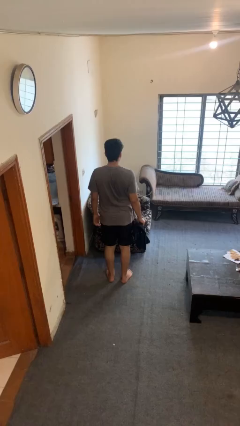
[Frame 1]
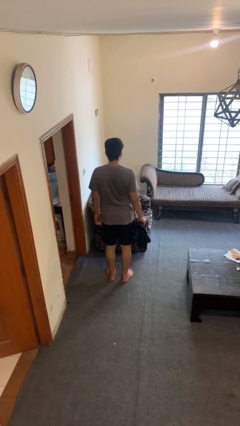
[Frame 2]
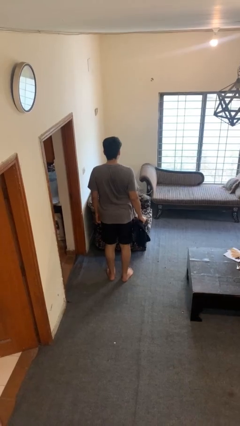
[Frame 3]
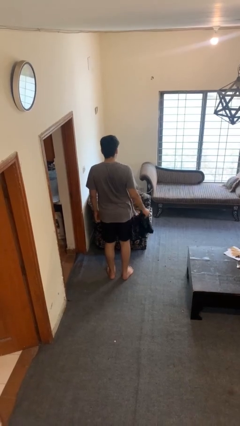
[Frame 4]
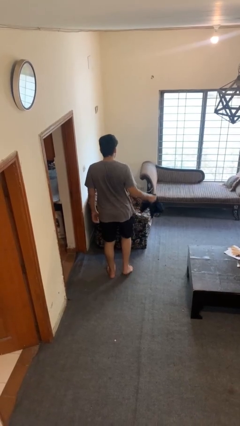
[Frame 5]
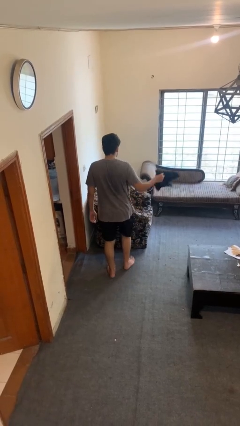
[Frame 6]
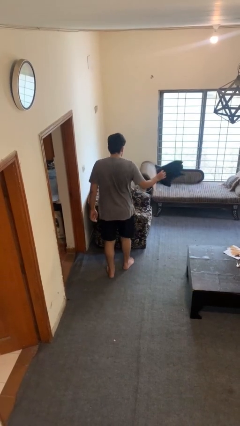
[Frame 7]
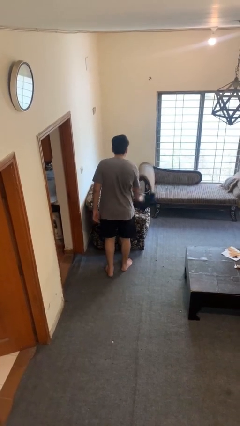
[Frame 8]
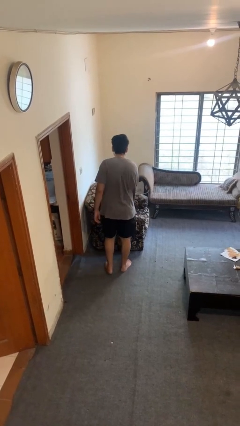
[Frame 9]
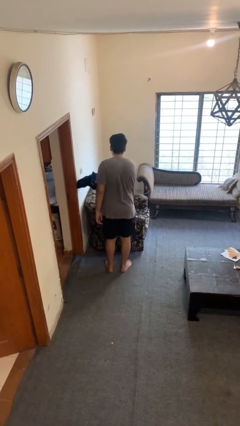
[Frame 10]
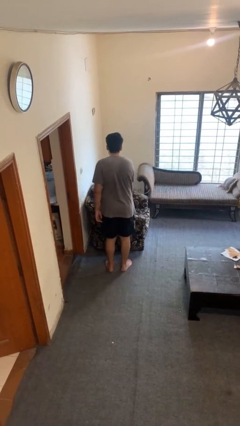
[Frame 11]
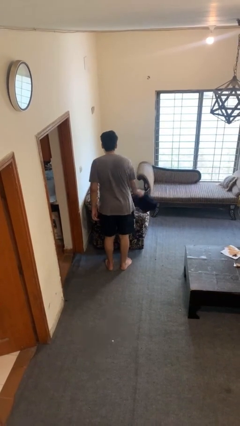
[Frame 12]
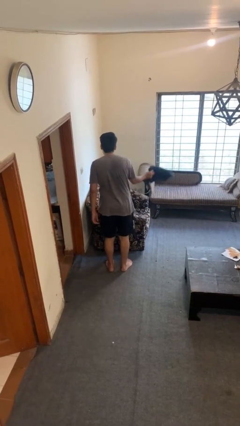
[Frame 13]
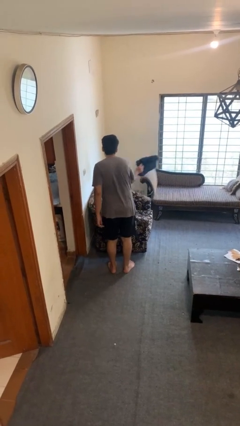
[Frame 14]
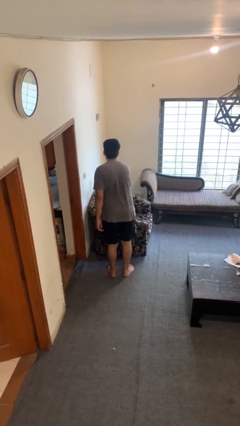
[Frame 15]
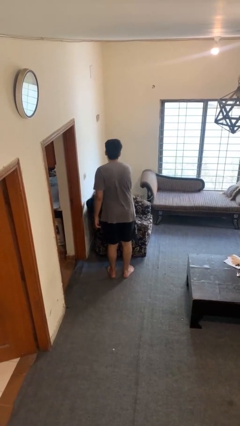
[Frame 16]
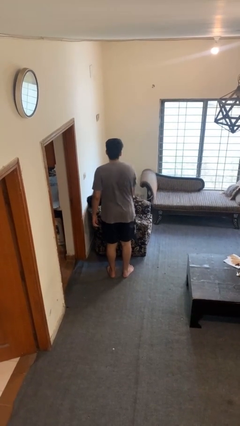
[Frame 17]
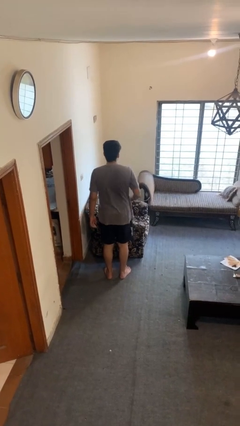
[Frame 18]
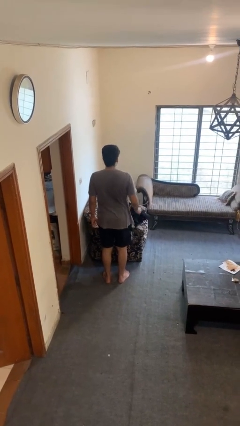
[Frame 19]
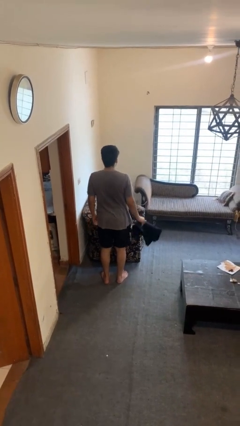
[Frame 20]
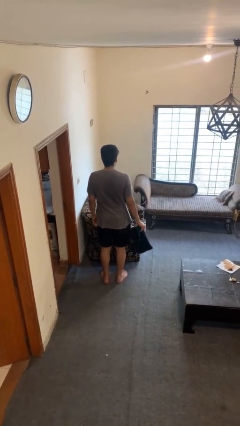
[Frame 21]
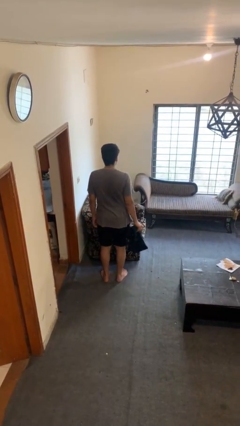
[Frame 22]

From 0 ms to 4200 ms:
person dusts furniture

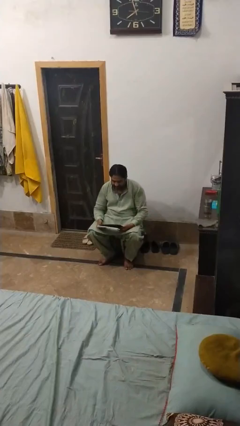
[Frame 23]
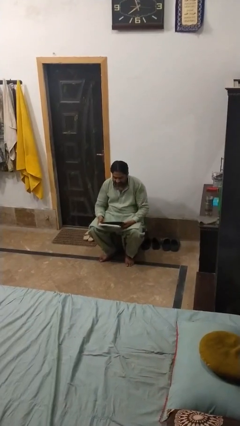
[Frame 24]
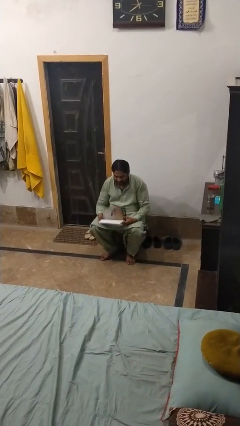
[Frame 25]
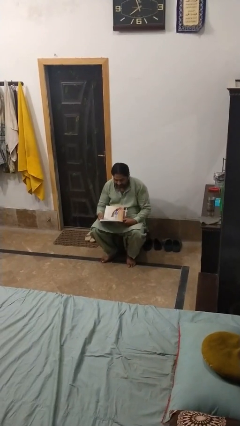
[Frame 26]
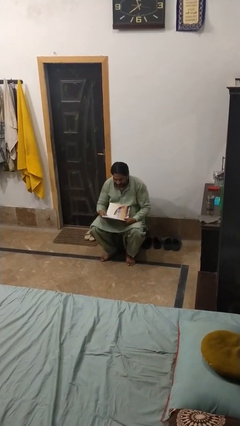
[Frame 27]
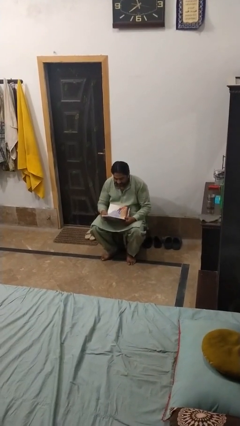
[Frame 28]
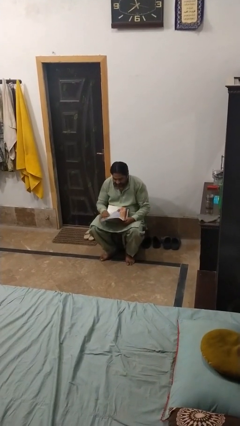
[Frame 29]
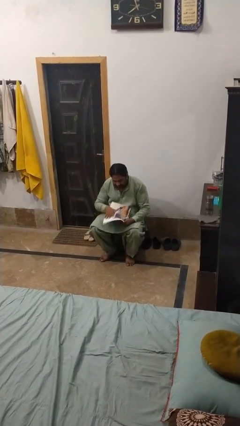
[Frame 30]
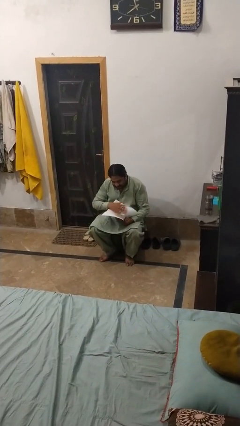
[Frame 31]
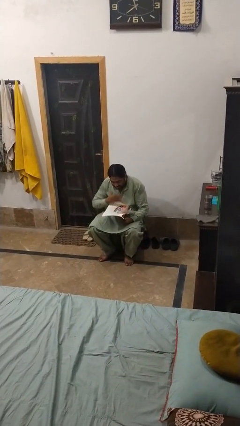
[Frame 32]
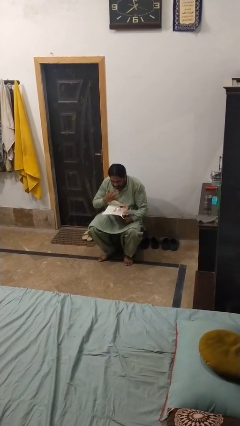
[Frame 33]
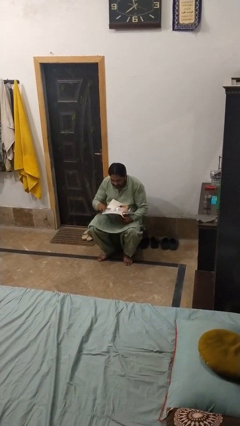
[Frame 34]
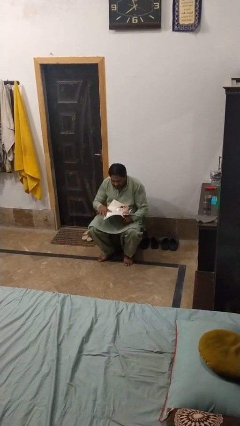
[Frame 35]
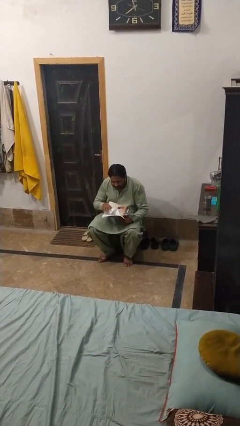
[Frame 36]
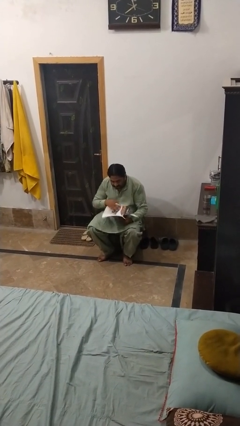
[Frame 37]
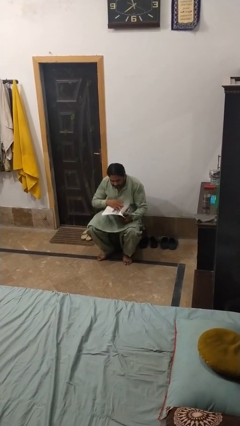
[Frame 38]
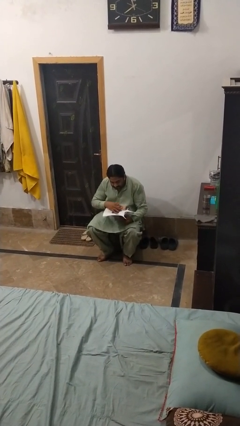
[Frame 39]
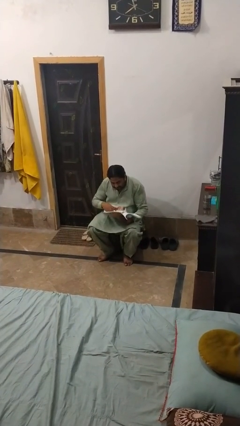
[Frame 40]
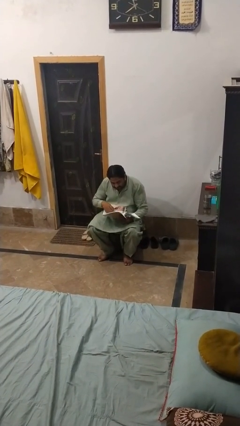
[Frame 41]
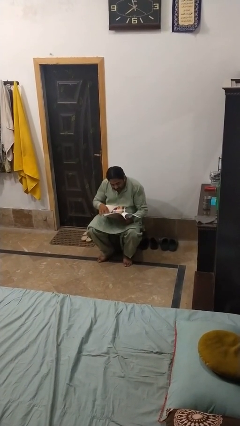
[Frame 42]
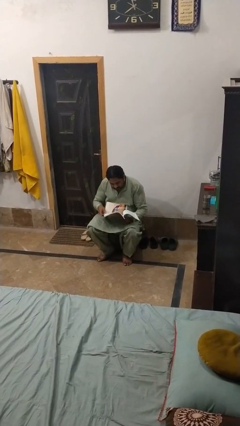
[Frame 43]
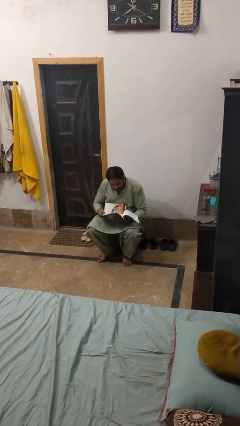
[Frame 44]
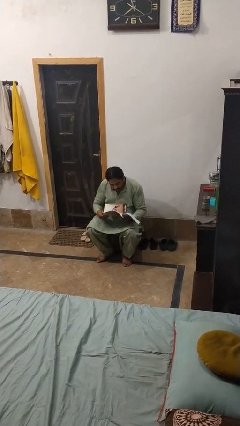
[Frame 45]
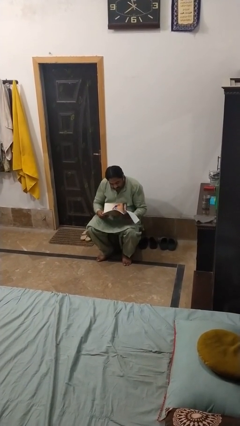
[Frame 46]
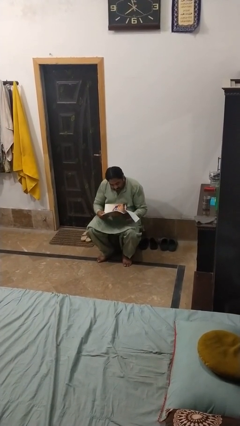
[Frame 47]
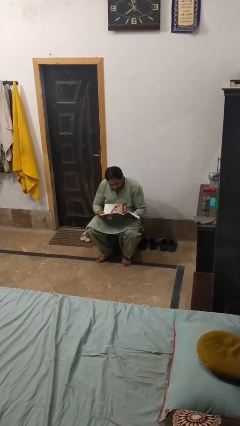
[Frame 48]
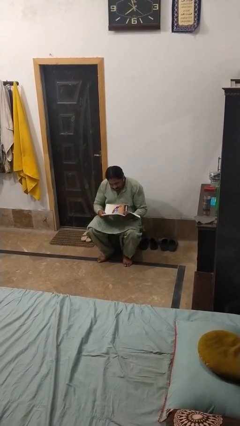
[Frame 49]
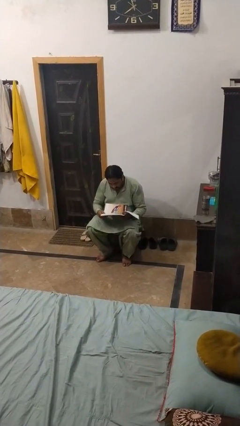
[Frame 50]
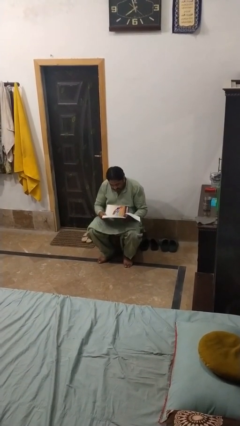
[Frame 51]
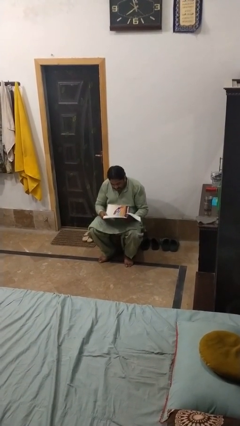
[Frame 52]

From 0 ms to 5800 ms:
person reads book

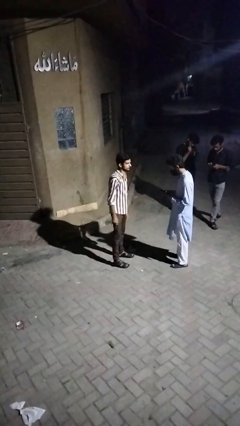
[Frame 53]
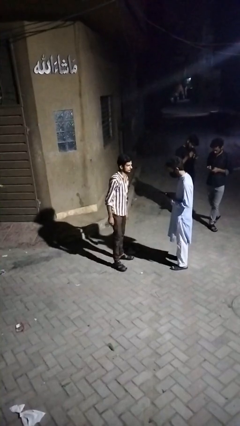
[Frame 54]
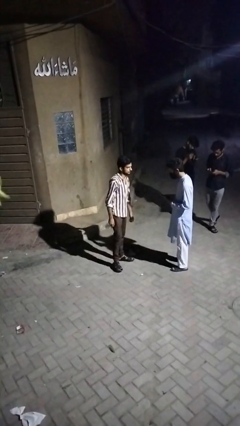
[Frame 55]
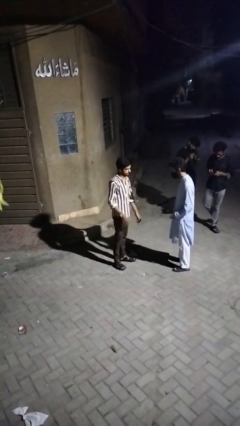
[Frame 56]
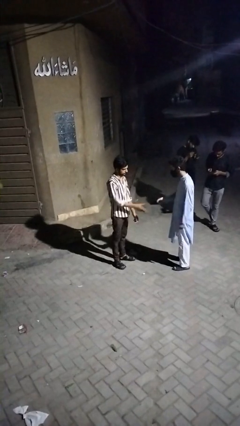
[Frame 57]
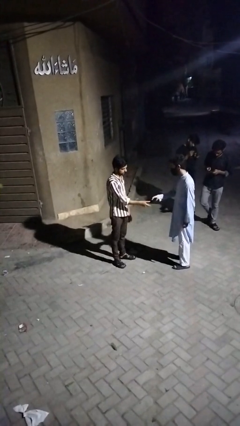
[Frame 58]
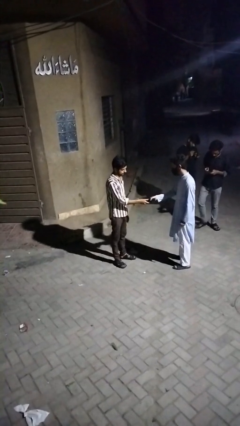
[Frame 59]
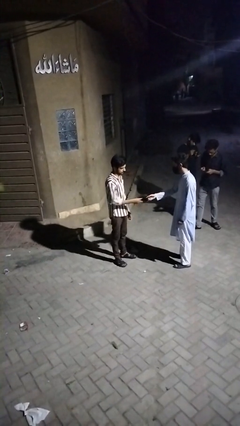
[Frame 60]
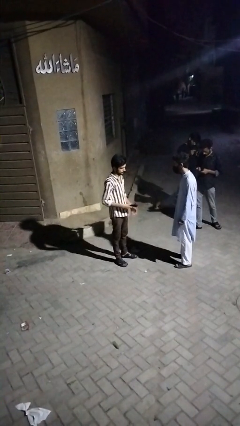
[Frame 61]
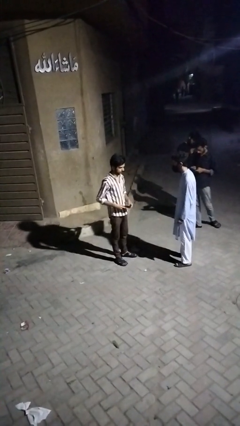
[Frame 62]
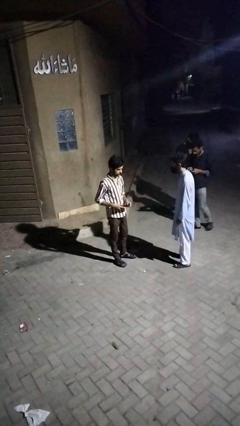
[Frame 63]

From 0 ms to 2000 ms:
person transfers object to person

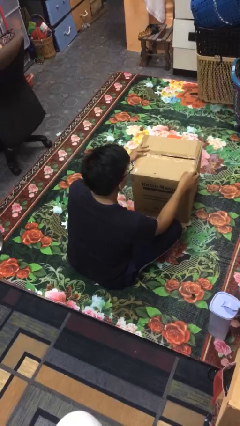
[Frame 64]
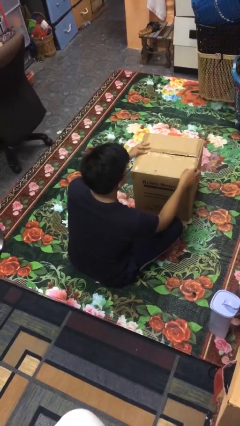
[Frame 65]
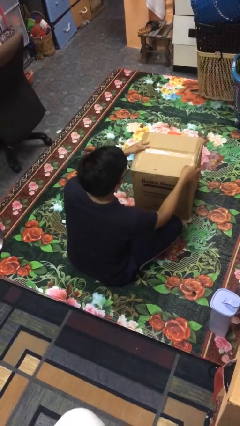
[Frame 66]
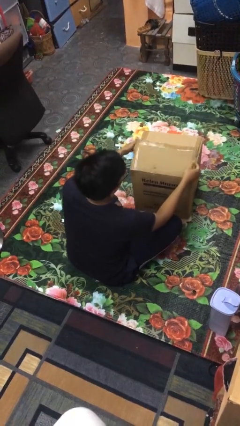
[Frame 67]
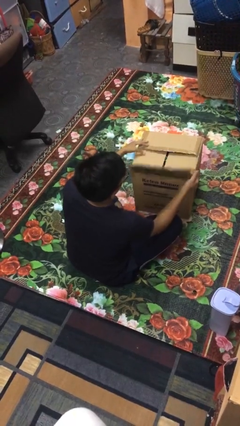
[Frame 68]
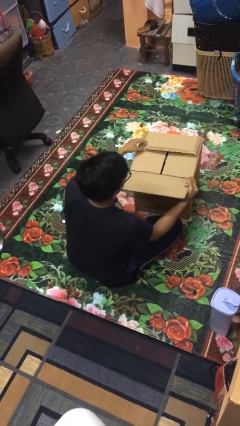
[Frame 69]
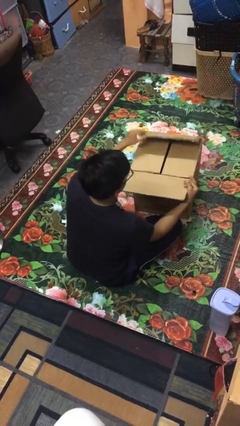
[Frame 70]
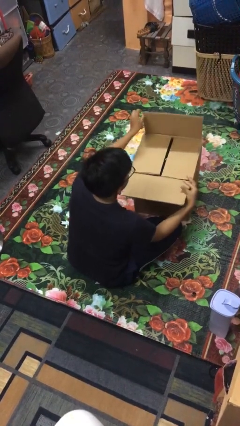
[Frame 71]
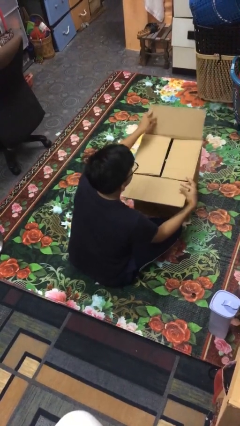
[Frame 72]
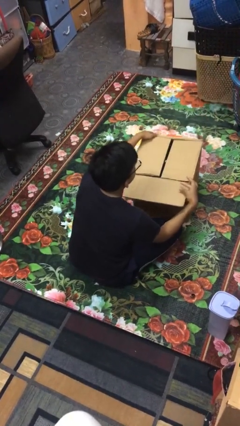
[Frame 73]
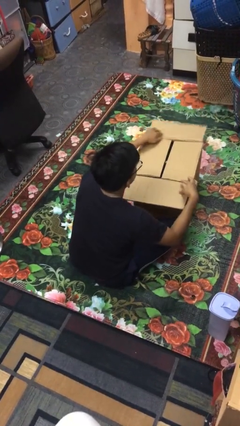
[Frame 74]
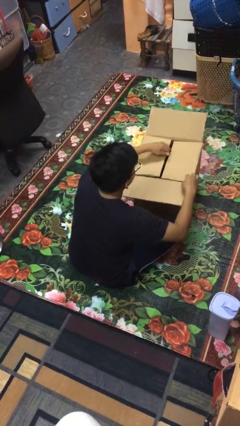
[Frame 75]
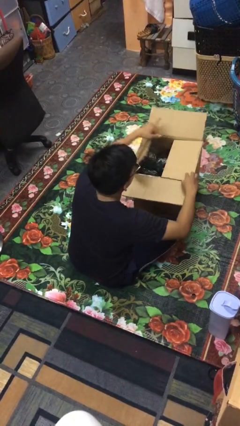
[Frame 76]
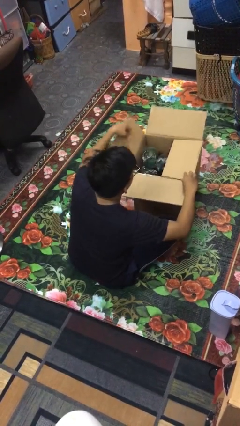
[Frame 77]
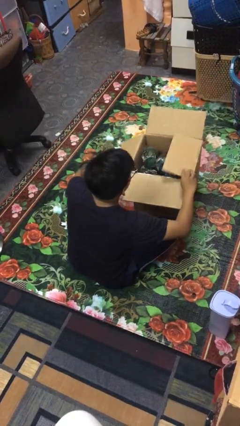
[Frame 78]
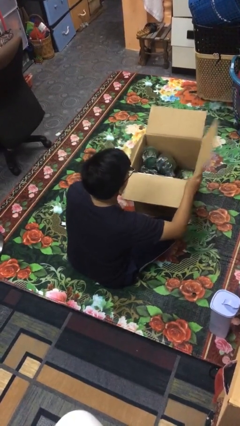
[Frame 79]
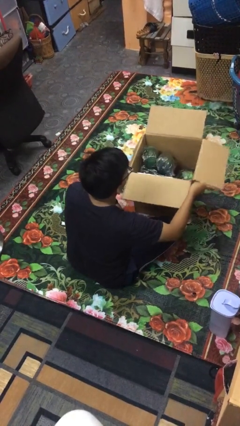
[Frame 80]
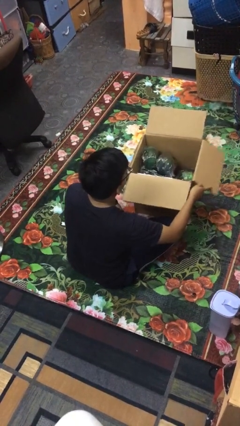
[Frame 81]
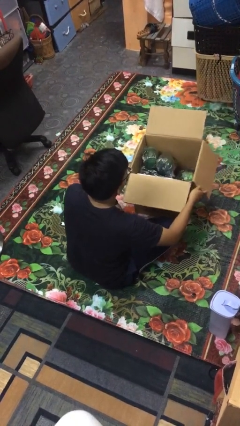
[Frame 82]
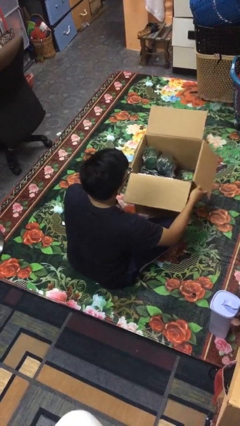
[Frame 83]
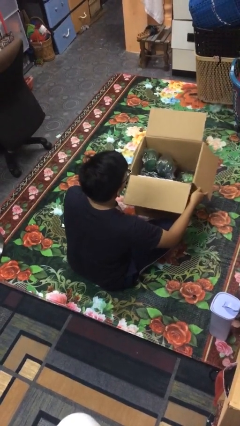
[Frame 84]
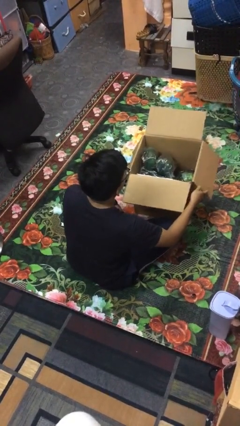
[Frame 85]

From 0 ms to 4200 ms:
person opens box

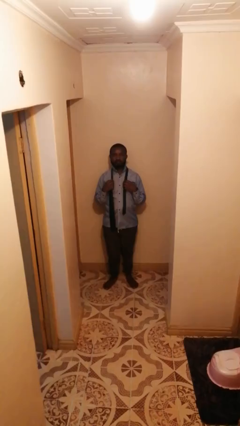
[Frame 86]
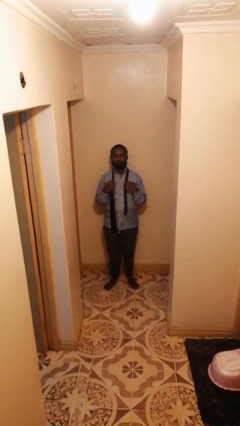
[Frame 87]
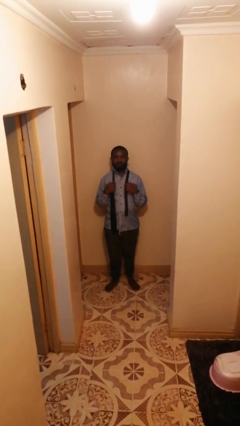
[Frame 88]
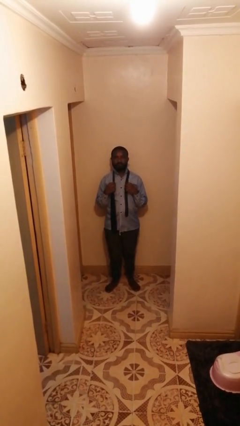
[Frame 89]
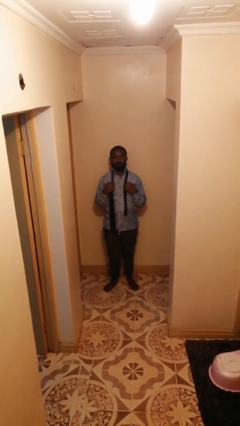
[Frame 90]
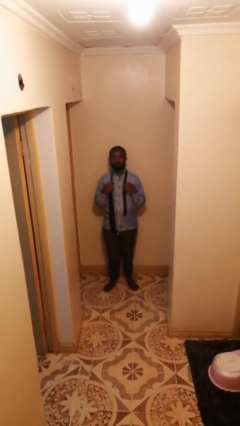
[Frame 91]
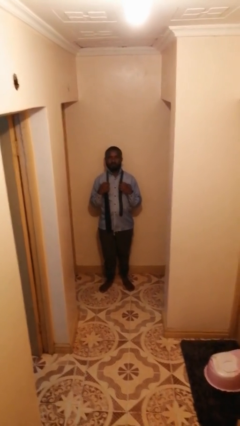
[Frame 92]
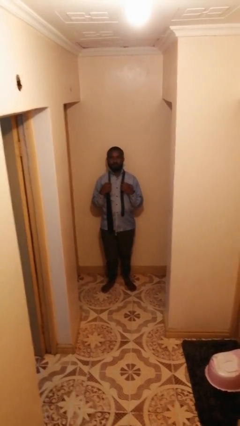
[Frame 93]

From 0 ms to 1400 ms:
person takes off necktie

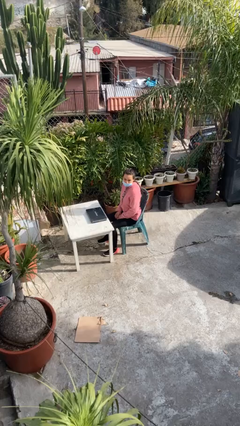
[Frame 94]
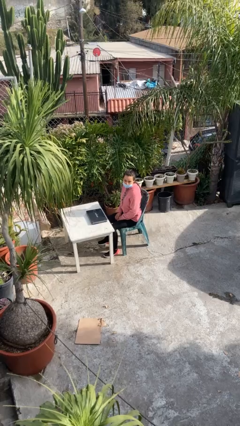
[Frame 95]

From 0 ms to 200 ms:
person interacts with laptop
